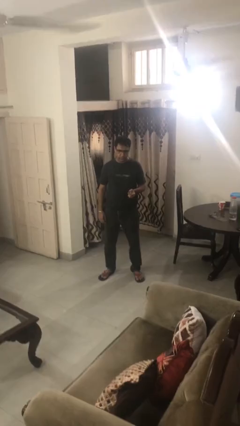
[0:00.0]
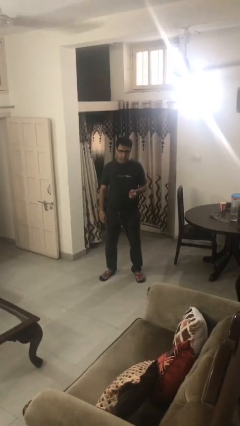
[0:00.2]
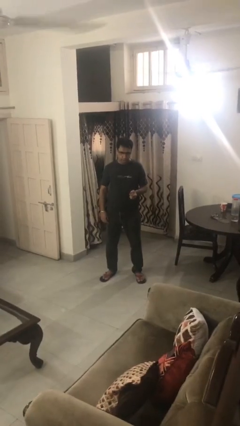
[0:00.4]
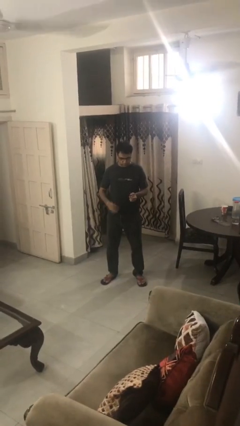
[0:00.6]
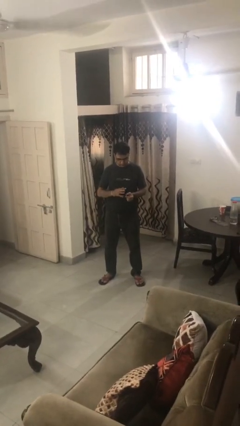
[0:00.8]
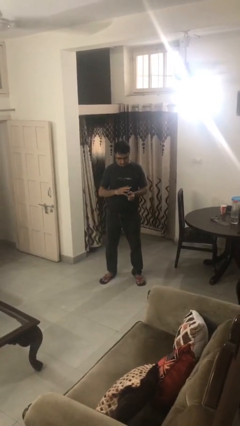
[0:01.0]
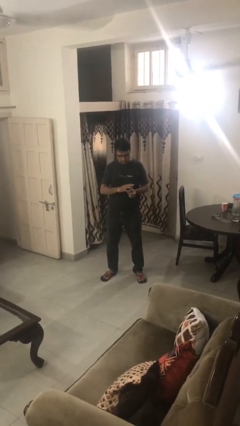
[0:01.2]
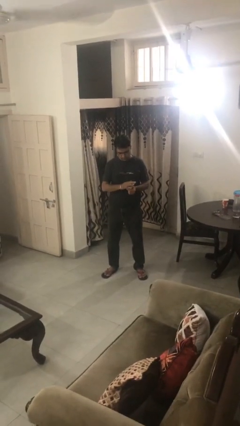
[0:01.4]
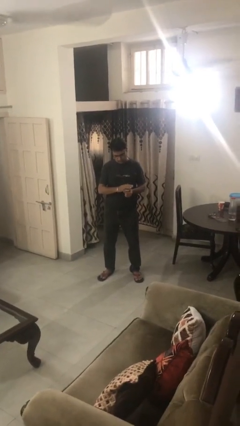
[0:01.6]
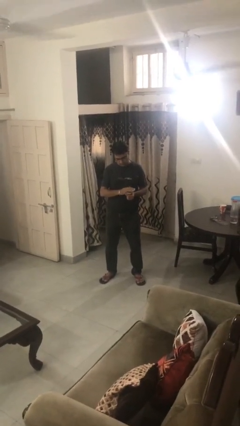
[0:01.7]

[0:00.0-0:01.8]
person puts on ring

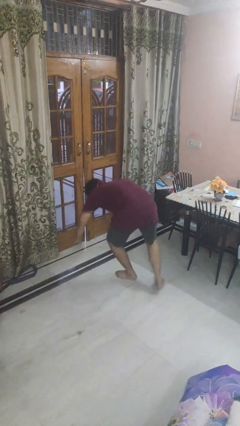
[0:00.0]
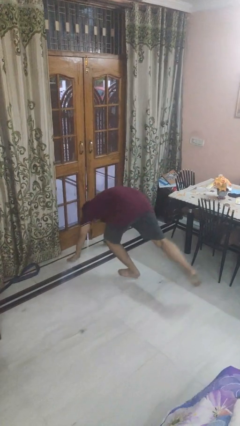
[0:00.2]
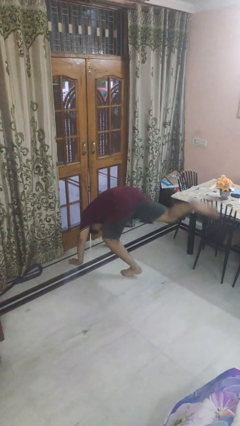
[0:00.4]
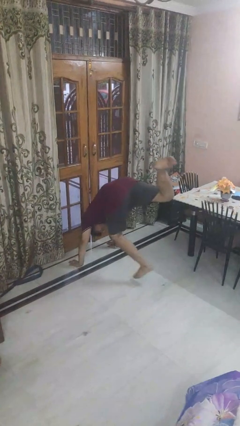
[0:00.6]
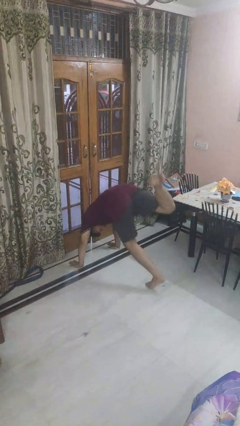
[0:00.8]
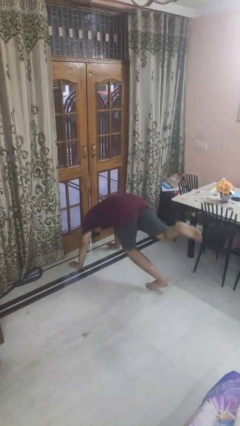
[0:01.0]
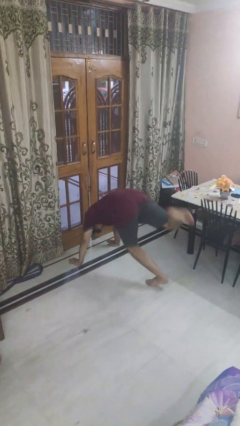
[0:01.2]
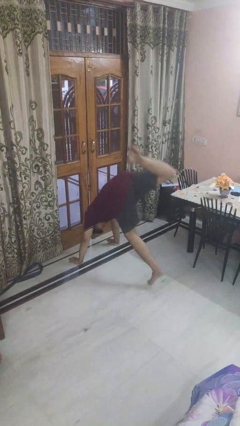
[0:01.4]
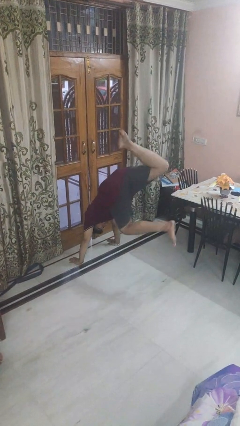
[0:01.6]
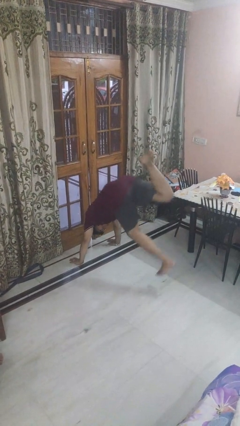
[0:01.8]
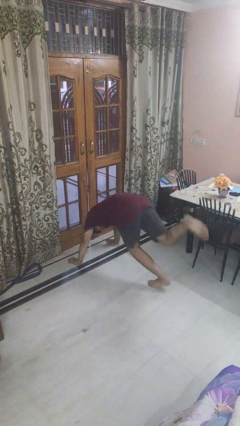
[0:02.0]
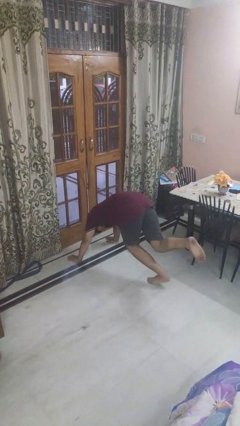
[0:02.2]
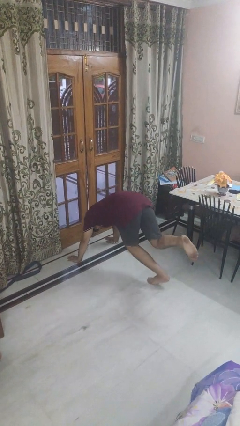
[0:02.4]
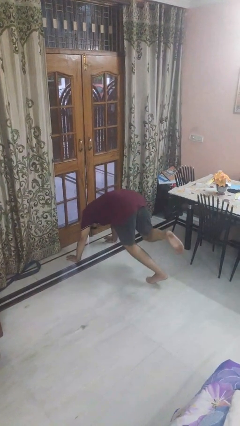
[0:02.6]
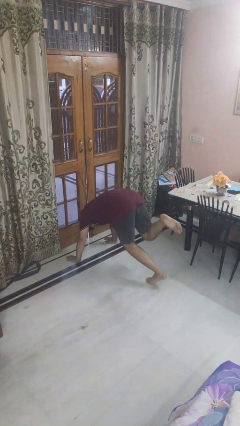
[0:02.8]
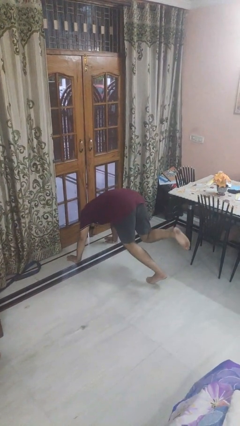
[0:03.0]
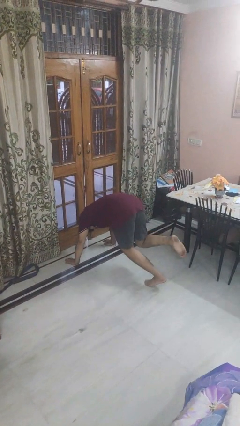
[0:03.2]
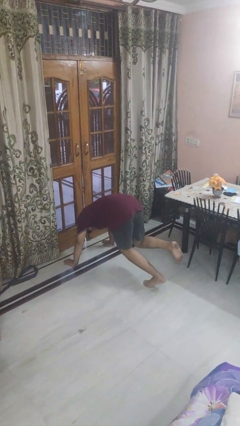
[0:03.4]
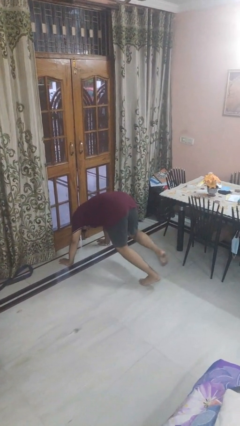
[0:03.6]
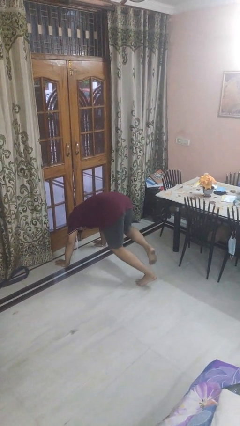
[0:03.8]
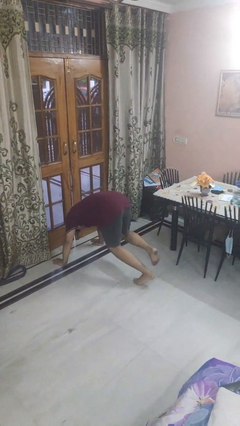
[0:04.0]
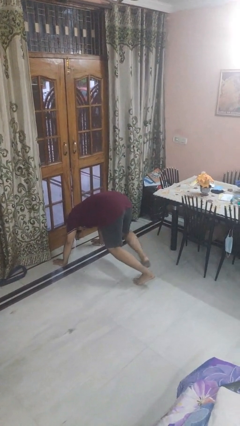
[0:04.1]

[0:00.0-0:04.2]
person handstand

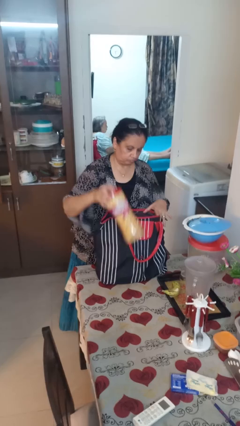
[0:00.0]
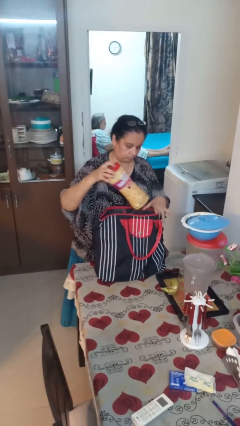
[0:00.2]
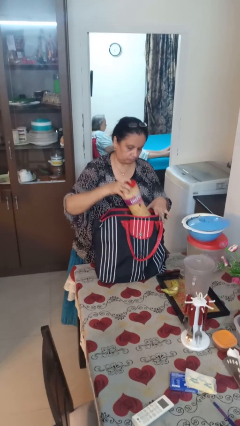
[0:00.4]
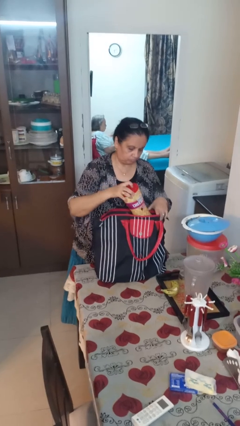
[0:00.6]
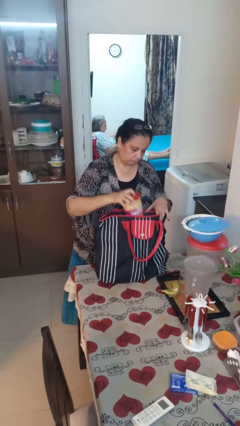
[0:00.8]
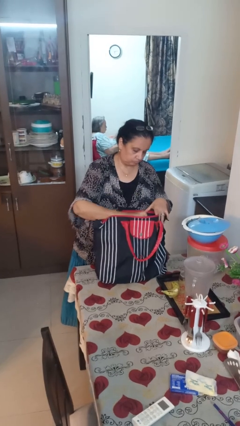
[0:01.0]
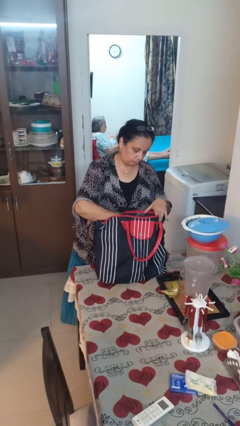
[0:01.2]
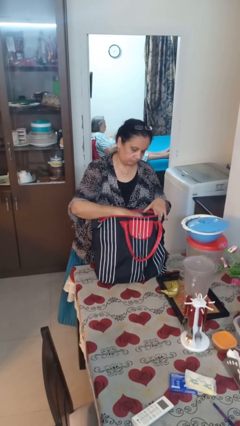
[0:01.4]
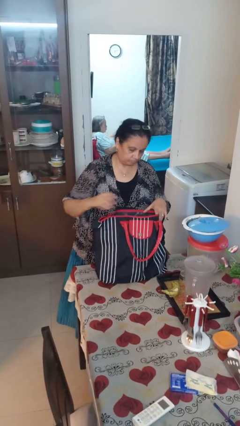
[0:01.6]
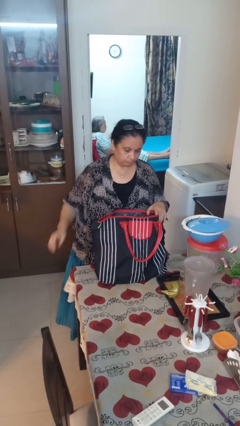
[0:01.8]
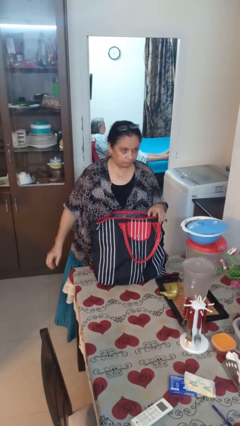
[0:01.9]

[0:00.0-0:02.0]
person puts object into bag

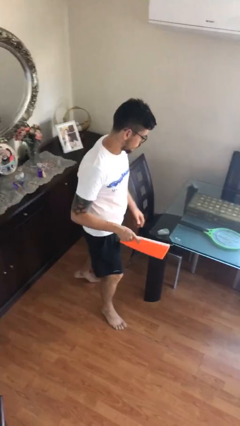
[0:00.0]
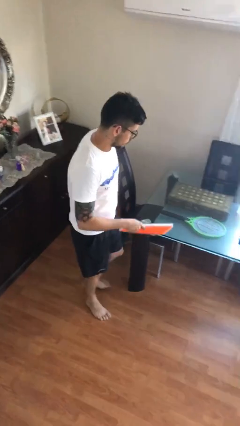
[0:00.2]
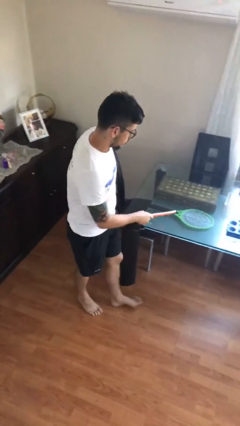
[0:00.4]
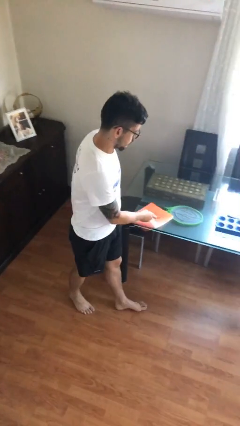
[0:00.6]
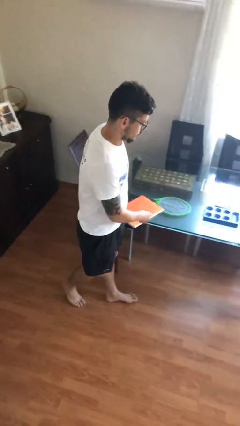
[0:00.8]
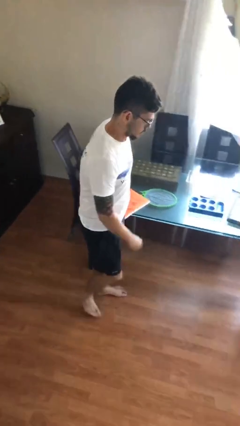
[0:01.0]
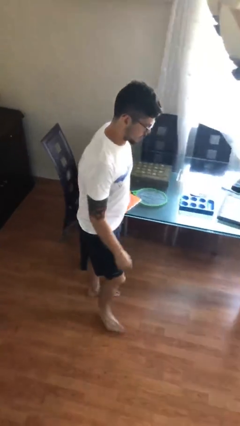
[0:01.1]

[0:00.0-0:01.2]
person puts down object on table

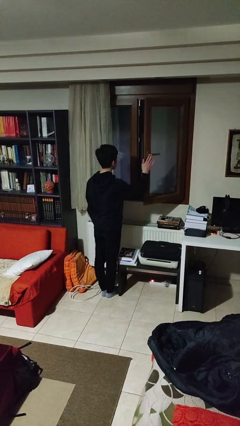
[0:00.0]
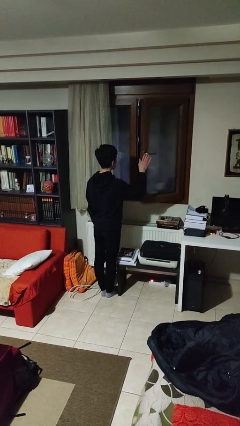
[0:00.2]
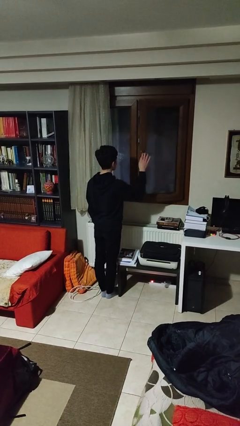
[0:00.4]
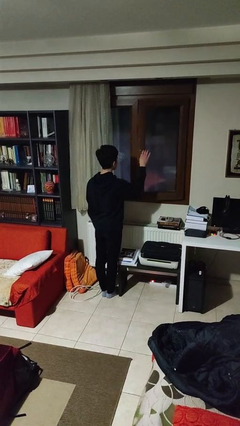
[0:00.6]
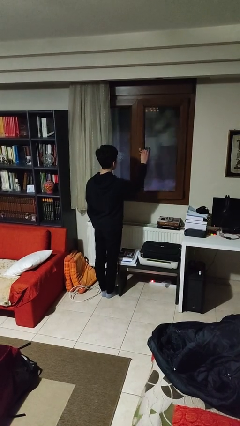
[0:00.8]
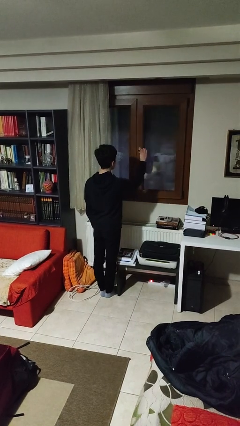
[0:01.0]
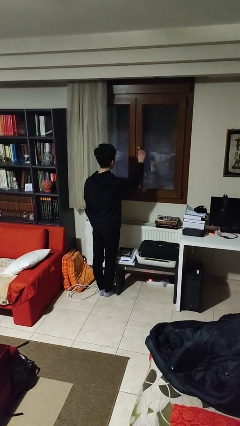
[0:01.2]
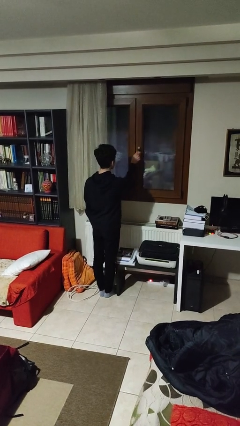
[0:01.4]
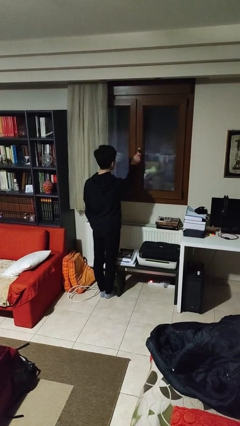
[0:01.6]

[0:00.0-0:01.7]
person closes home window

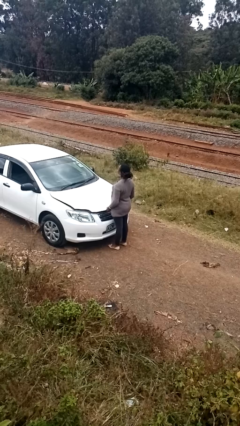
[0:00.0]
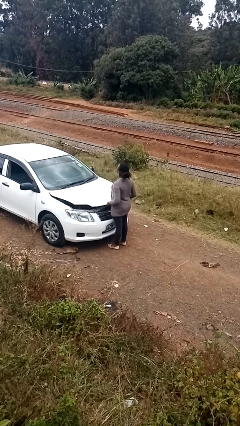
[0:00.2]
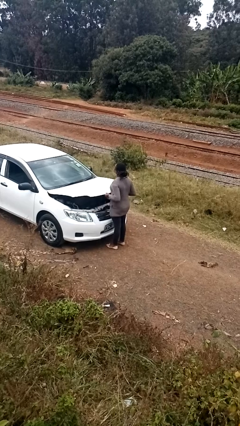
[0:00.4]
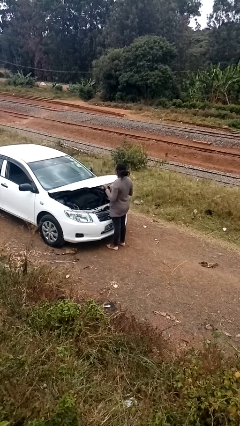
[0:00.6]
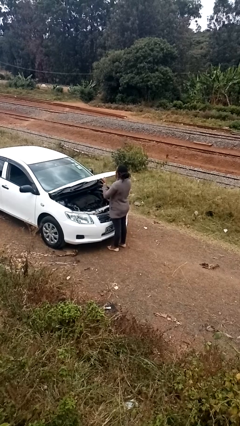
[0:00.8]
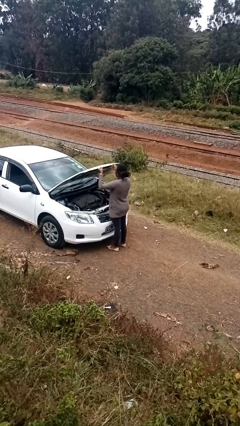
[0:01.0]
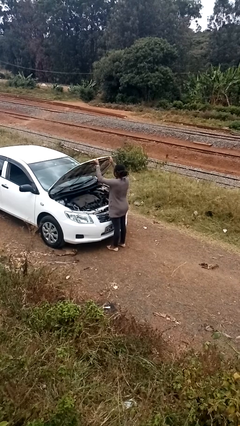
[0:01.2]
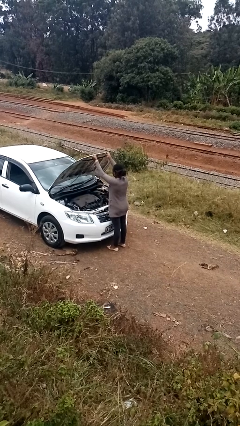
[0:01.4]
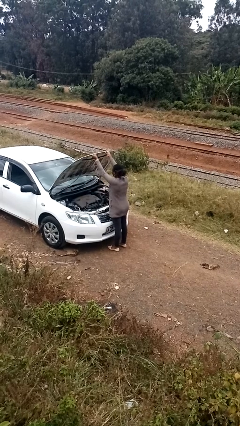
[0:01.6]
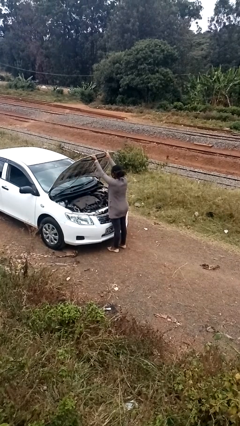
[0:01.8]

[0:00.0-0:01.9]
person opens car hood

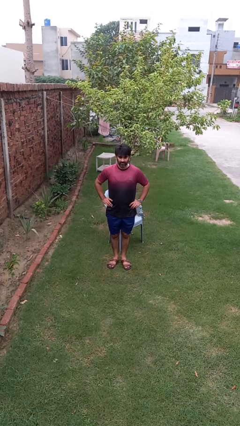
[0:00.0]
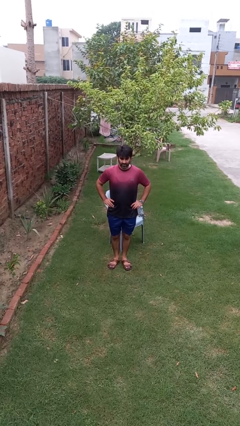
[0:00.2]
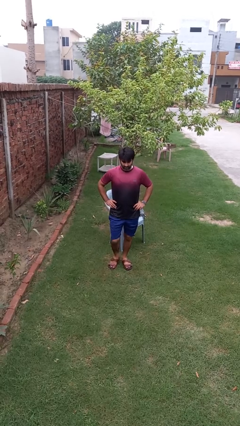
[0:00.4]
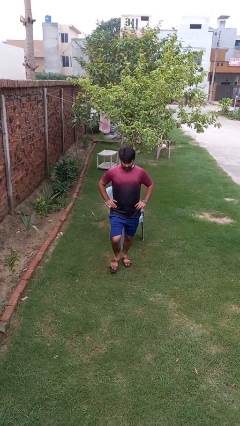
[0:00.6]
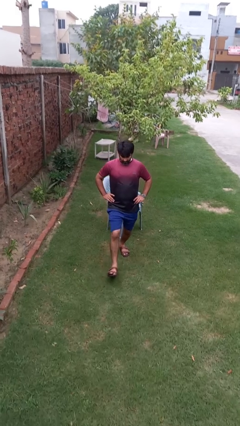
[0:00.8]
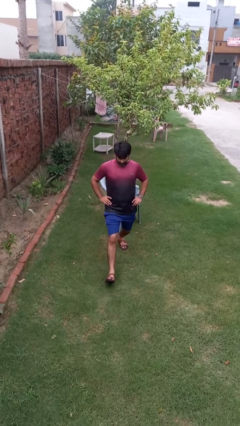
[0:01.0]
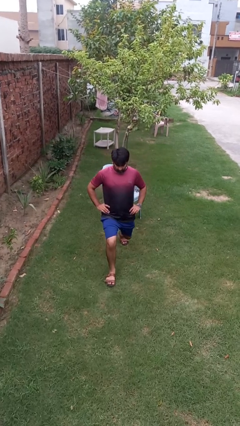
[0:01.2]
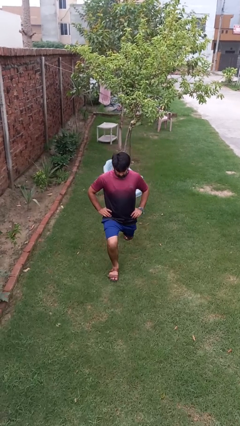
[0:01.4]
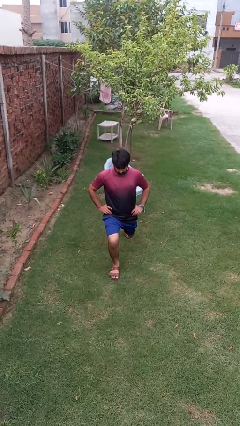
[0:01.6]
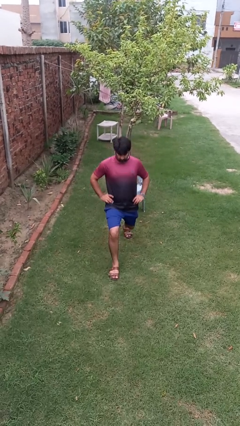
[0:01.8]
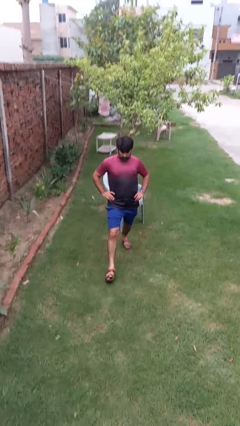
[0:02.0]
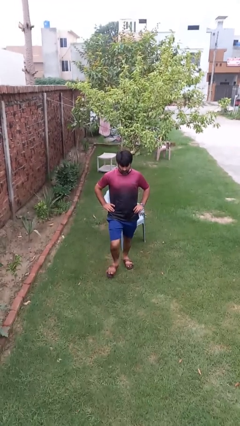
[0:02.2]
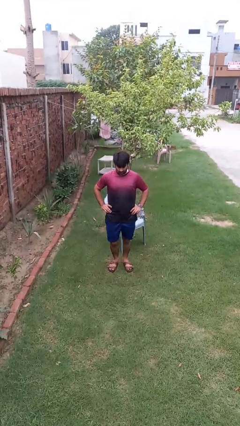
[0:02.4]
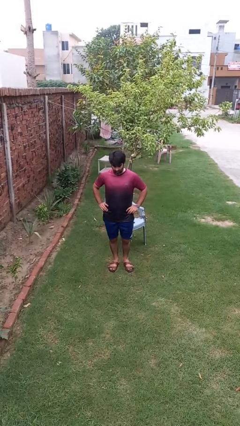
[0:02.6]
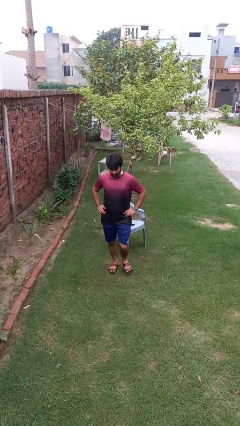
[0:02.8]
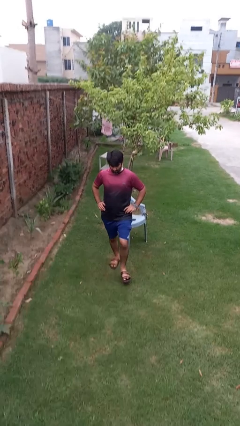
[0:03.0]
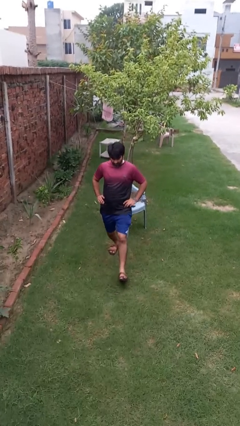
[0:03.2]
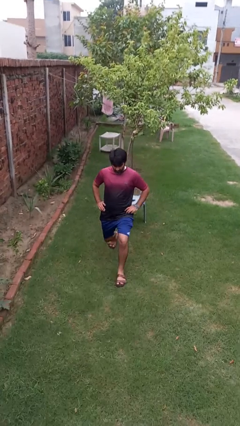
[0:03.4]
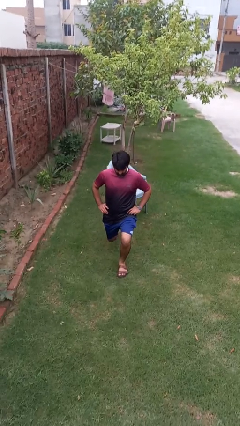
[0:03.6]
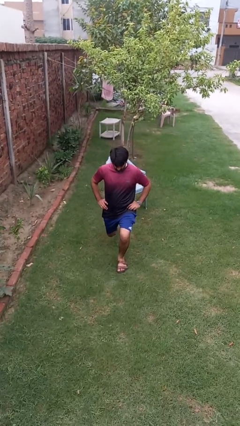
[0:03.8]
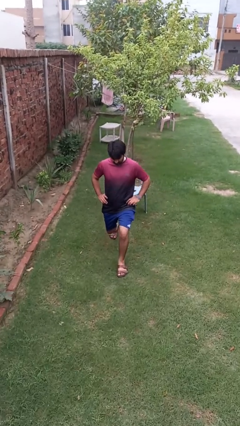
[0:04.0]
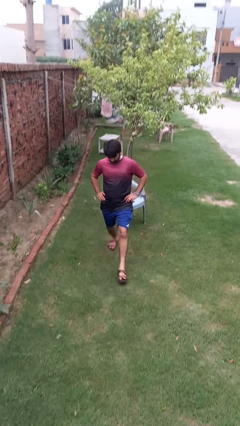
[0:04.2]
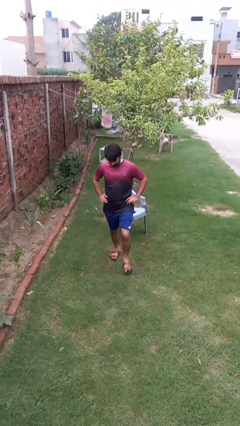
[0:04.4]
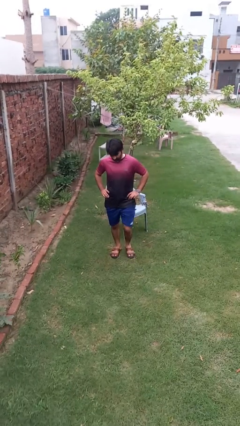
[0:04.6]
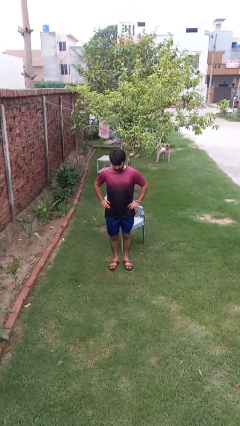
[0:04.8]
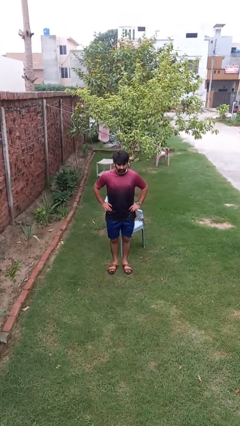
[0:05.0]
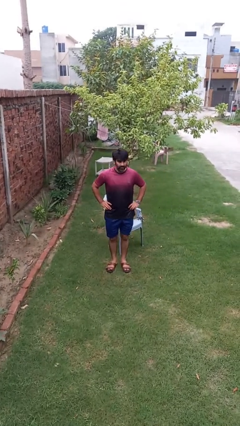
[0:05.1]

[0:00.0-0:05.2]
person exercises with lunges
